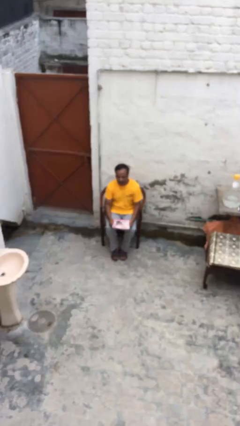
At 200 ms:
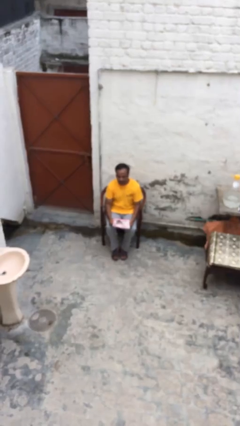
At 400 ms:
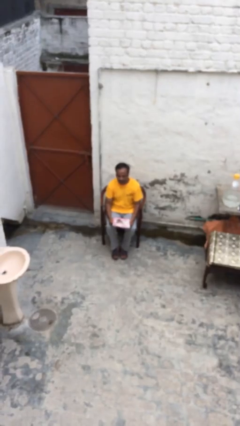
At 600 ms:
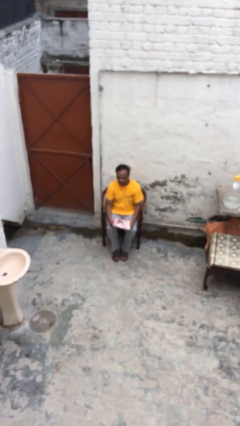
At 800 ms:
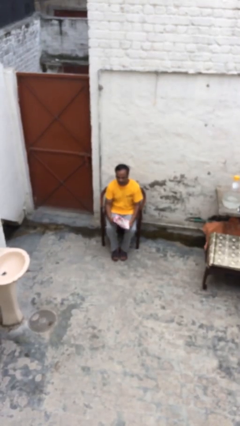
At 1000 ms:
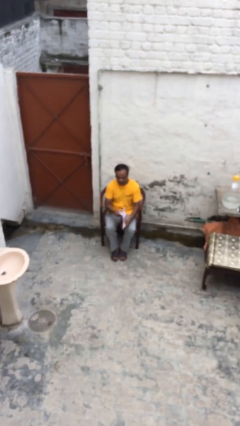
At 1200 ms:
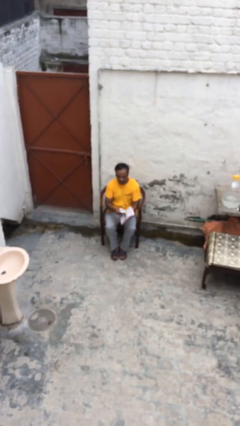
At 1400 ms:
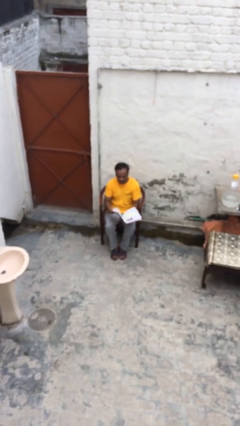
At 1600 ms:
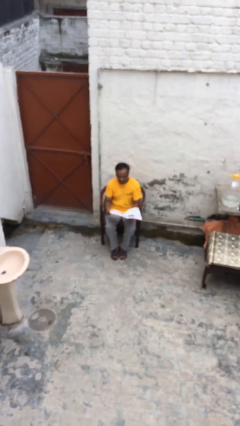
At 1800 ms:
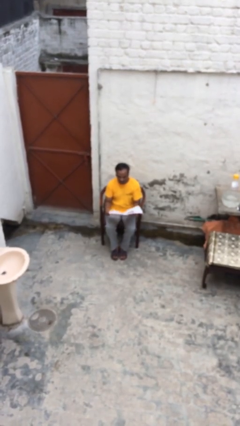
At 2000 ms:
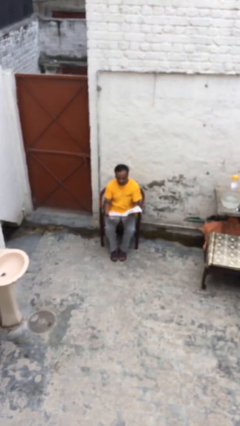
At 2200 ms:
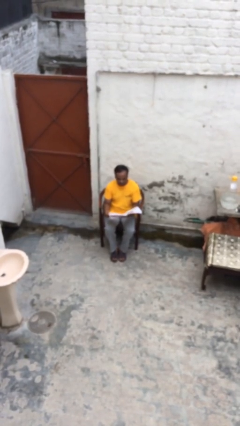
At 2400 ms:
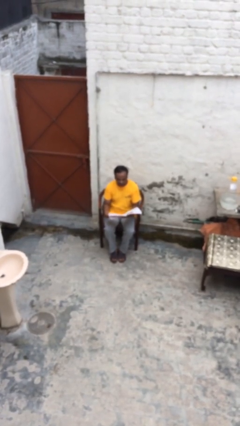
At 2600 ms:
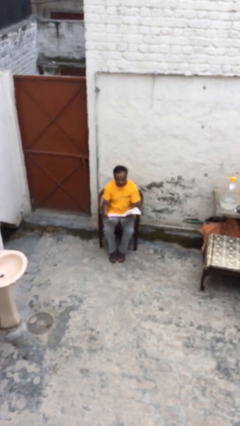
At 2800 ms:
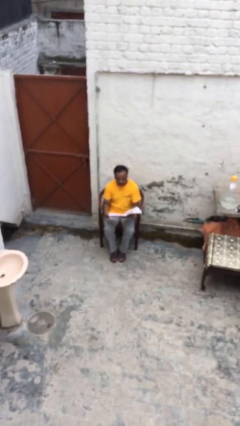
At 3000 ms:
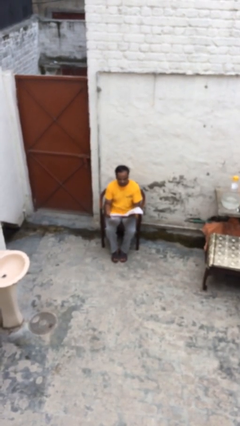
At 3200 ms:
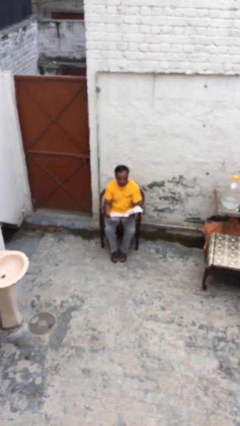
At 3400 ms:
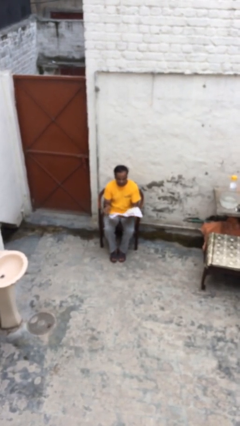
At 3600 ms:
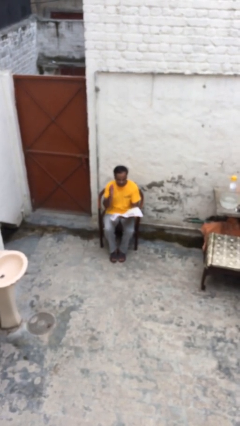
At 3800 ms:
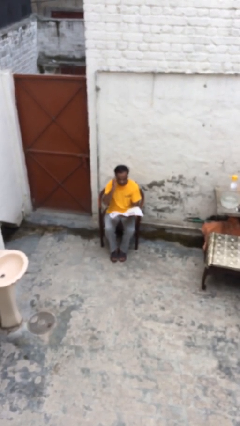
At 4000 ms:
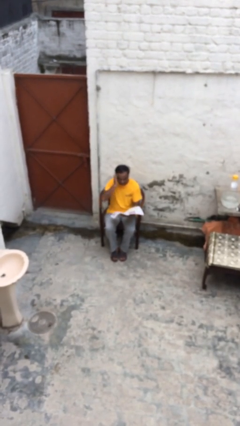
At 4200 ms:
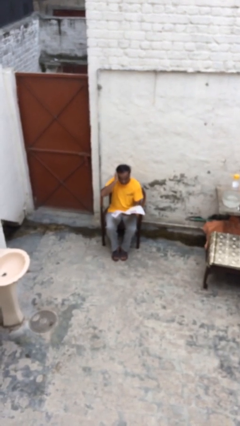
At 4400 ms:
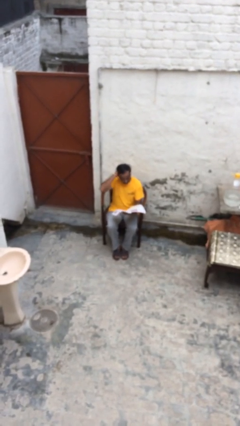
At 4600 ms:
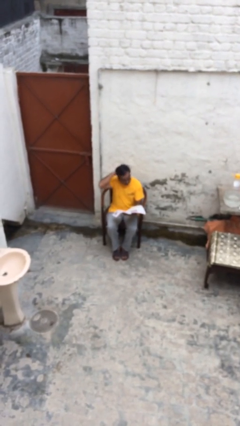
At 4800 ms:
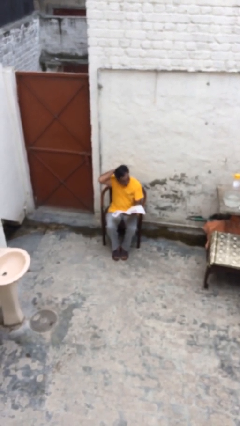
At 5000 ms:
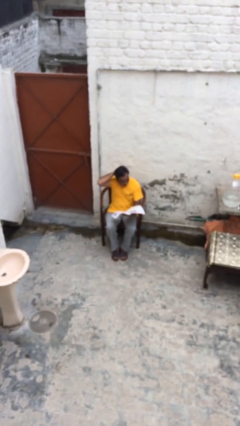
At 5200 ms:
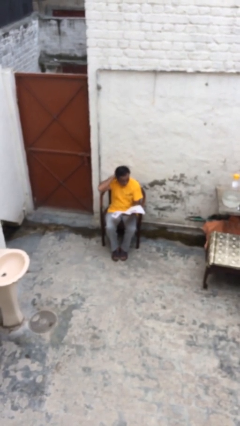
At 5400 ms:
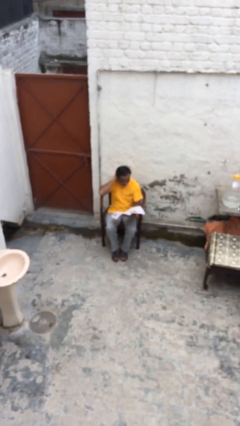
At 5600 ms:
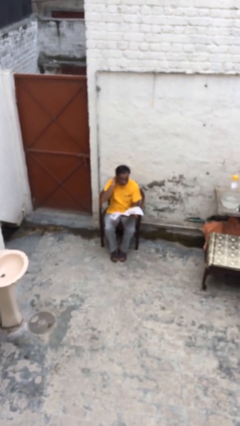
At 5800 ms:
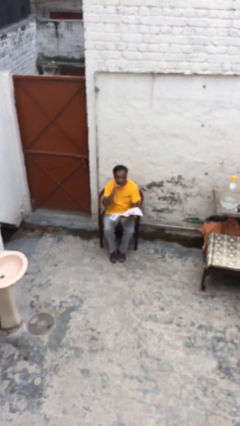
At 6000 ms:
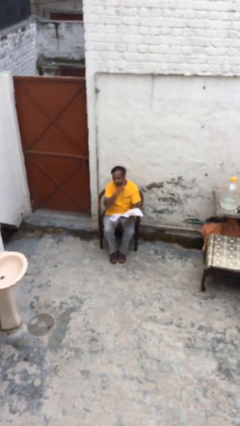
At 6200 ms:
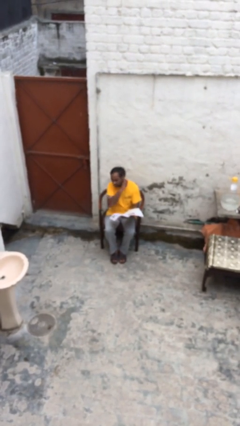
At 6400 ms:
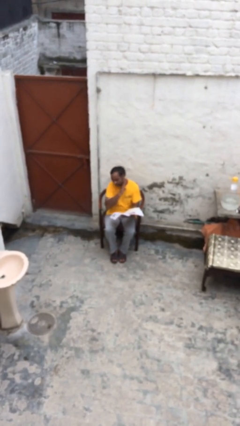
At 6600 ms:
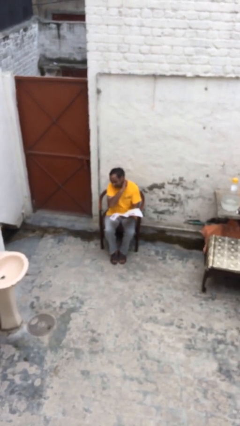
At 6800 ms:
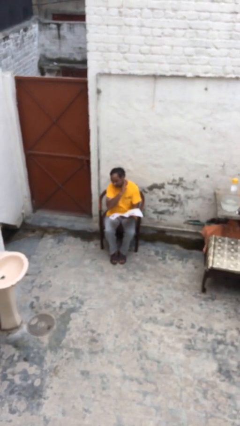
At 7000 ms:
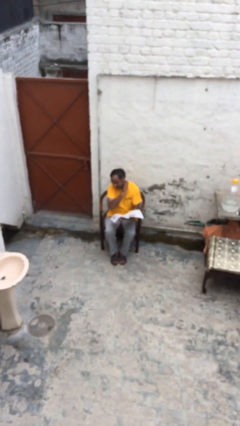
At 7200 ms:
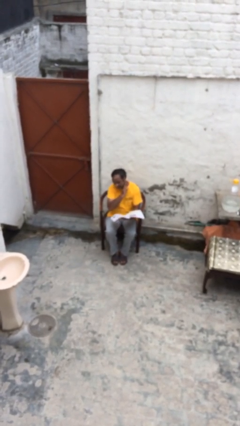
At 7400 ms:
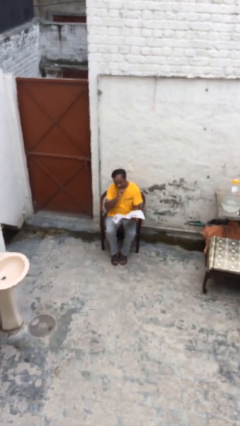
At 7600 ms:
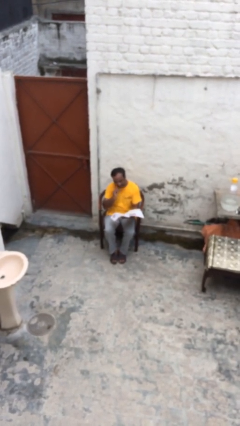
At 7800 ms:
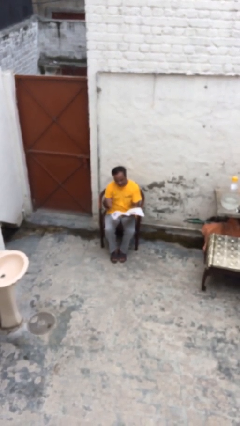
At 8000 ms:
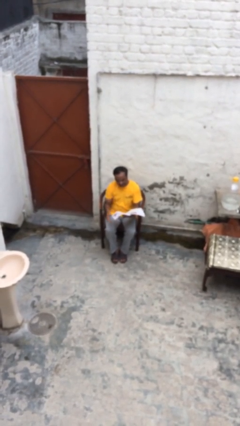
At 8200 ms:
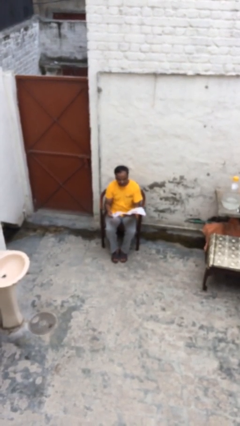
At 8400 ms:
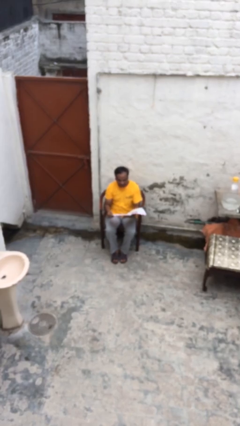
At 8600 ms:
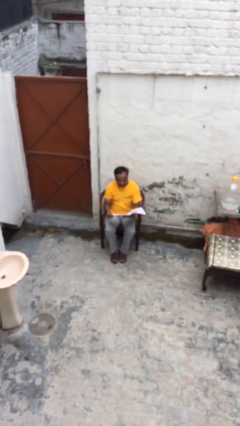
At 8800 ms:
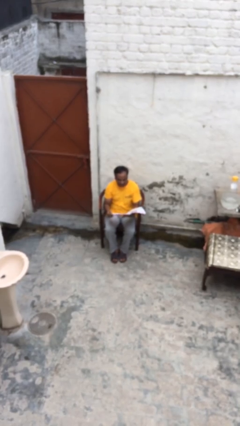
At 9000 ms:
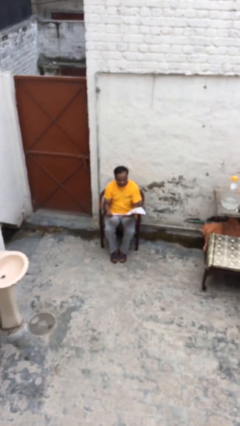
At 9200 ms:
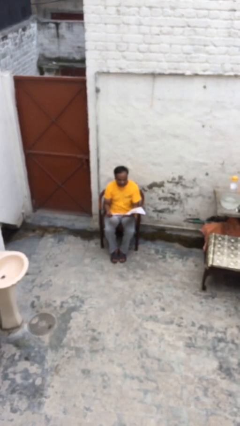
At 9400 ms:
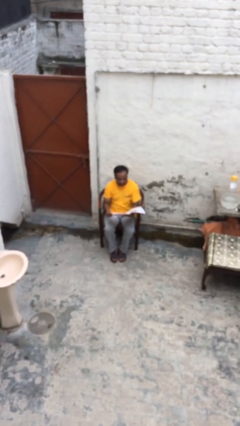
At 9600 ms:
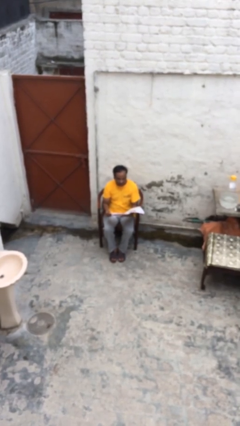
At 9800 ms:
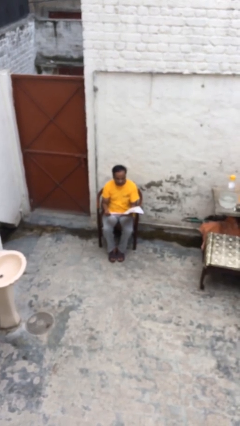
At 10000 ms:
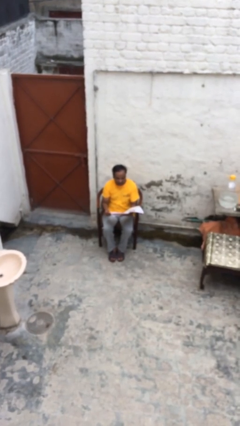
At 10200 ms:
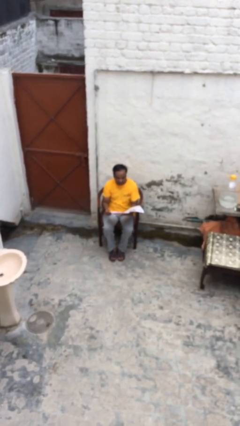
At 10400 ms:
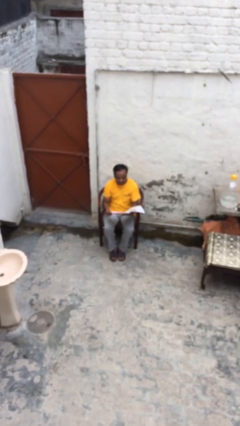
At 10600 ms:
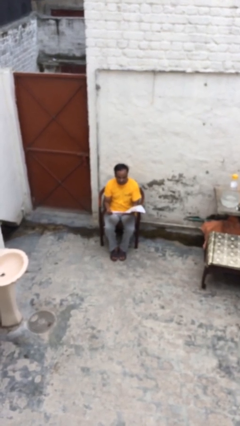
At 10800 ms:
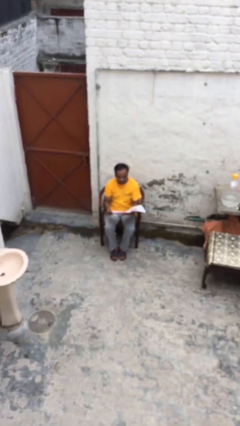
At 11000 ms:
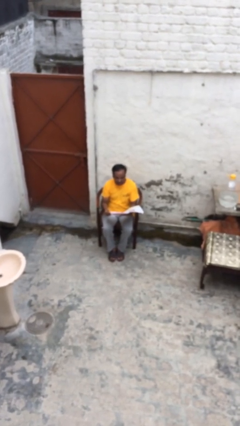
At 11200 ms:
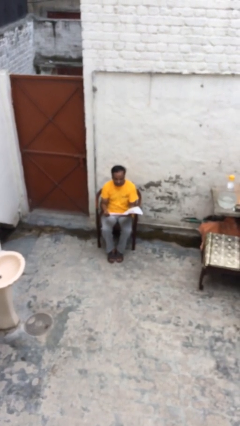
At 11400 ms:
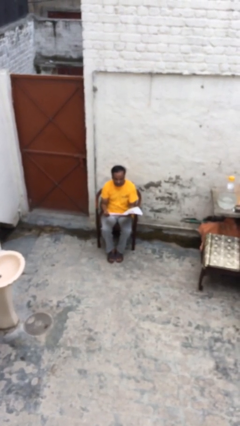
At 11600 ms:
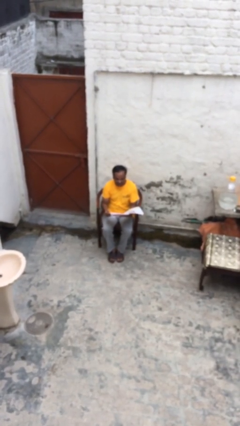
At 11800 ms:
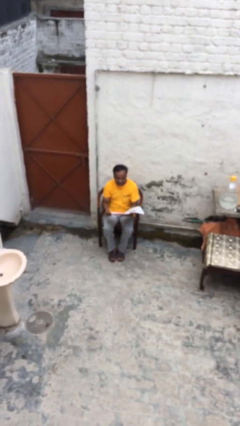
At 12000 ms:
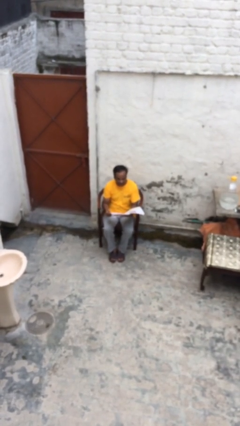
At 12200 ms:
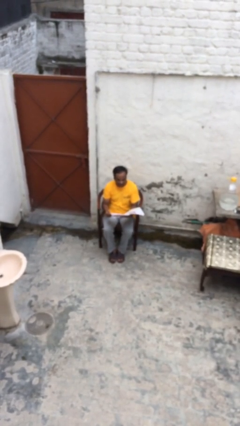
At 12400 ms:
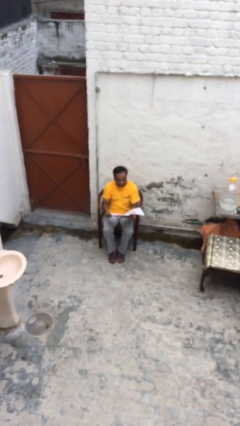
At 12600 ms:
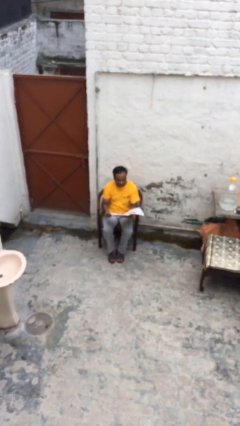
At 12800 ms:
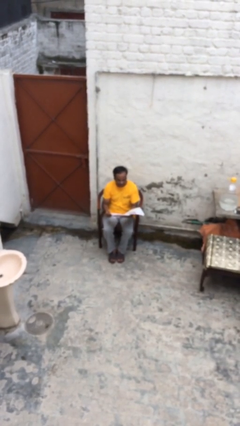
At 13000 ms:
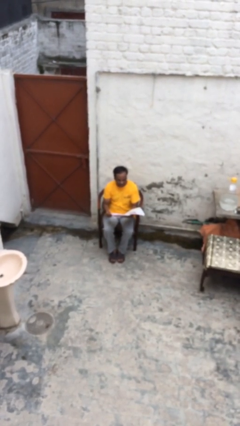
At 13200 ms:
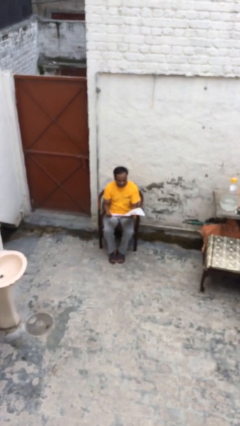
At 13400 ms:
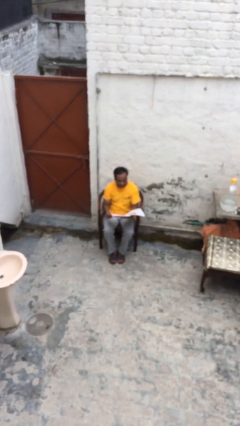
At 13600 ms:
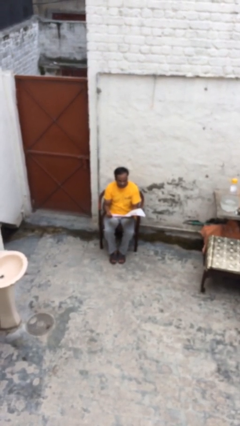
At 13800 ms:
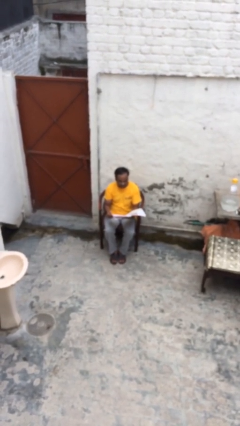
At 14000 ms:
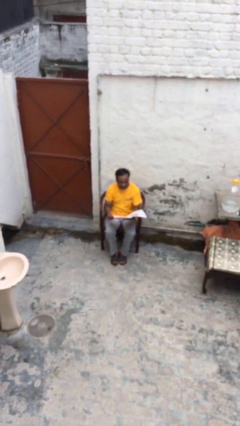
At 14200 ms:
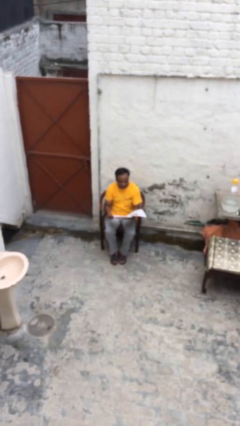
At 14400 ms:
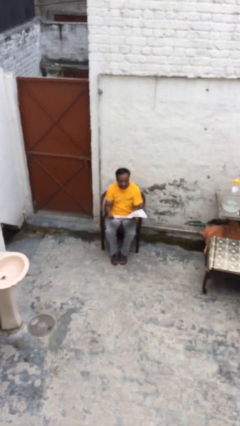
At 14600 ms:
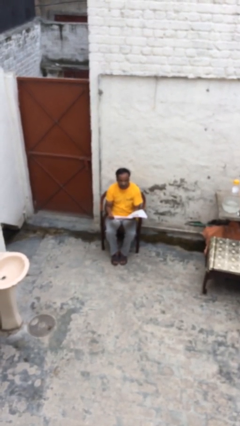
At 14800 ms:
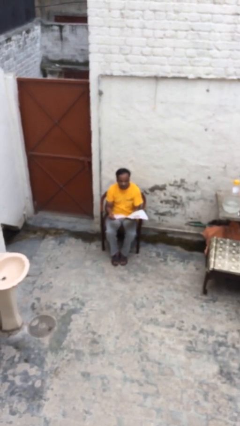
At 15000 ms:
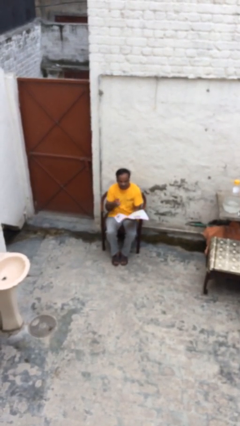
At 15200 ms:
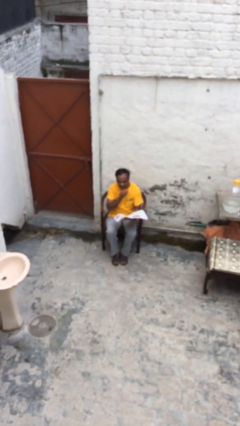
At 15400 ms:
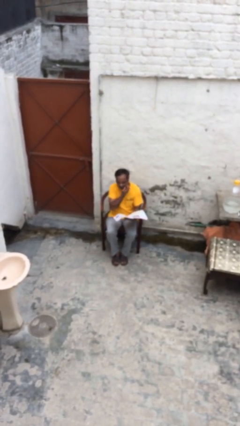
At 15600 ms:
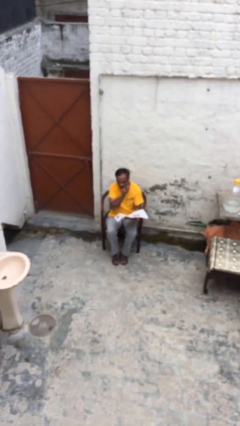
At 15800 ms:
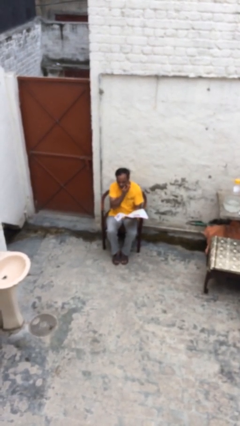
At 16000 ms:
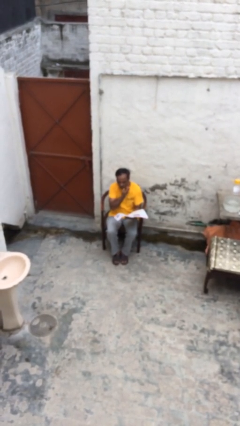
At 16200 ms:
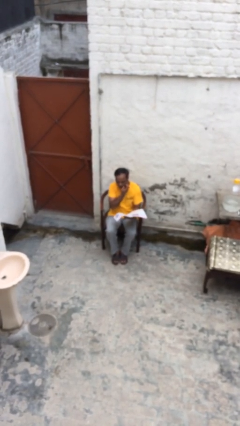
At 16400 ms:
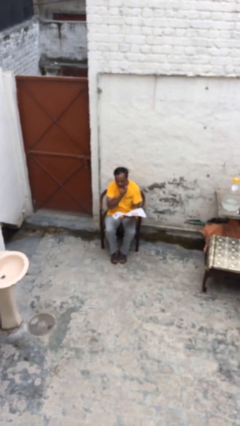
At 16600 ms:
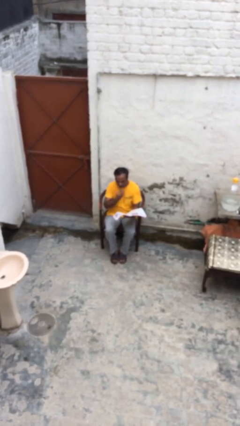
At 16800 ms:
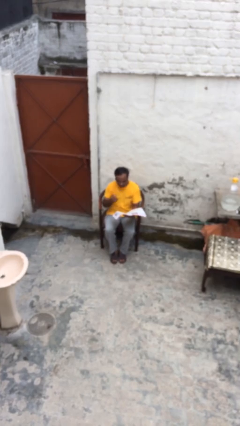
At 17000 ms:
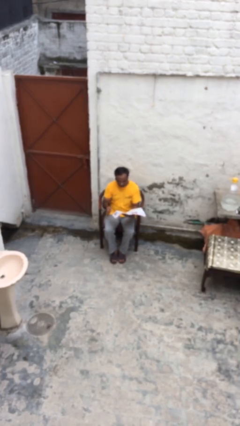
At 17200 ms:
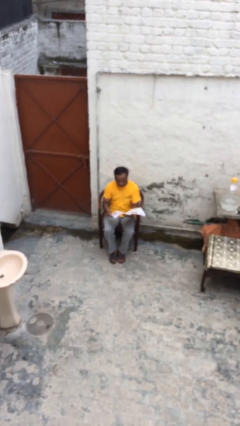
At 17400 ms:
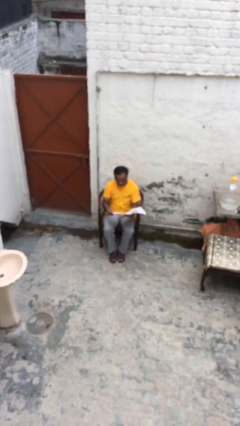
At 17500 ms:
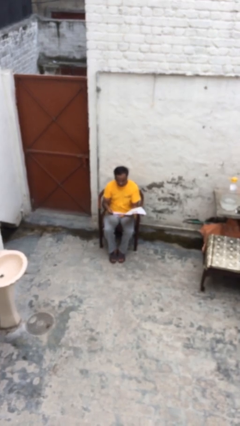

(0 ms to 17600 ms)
person reads document

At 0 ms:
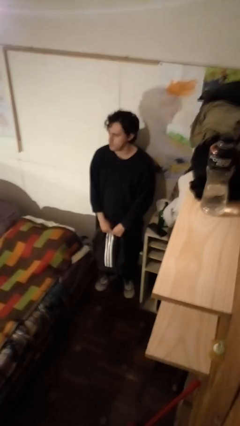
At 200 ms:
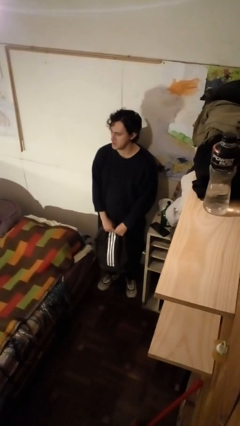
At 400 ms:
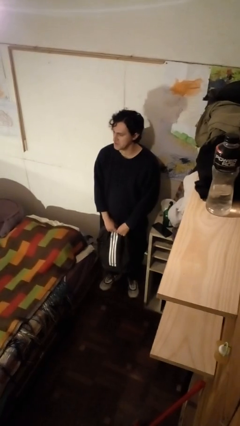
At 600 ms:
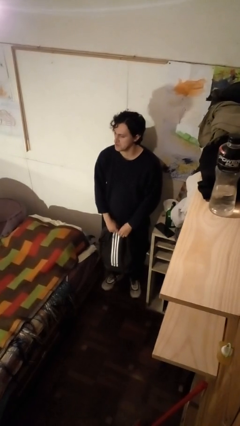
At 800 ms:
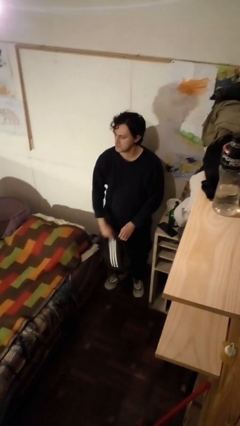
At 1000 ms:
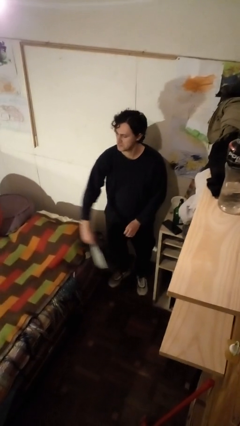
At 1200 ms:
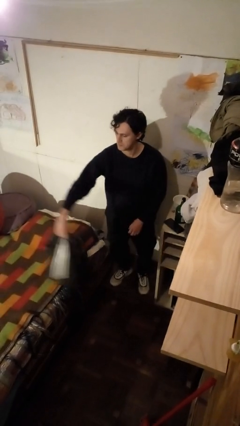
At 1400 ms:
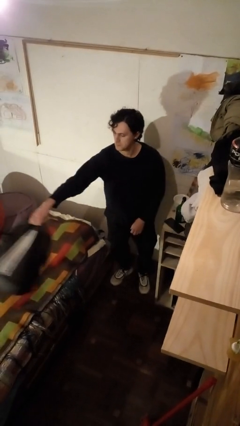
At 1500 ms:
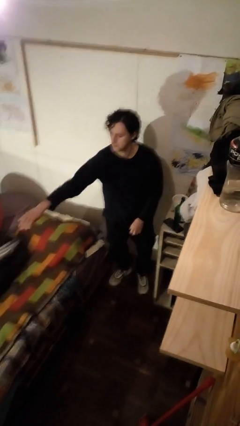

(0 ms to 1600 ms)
person throws object on bed
